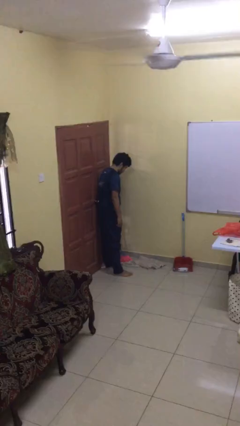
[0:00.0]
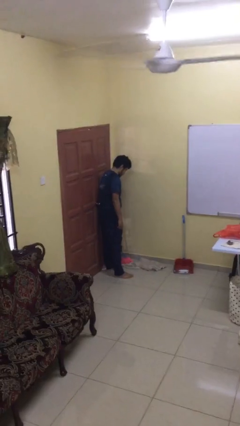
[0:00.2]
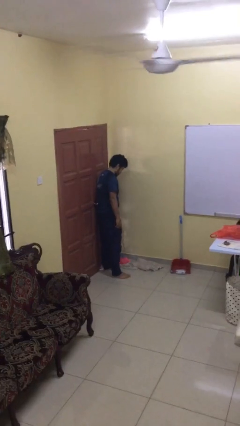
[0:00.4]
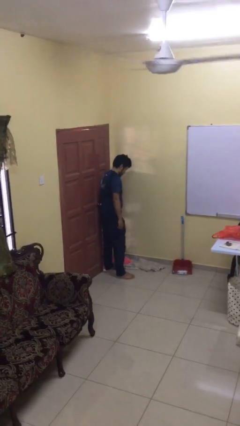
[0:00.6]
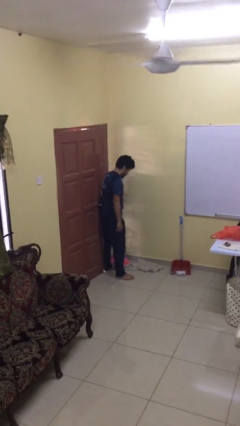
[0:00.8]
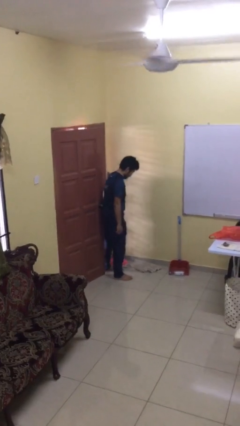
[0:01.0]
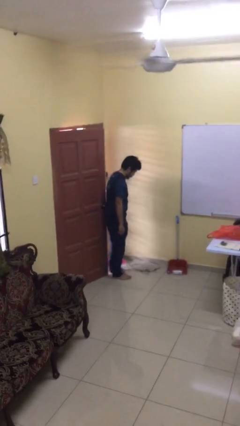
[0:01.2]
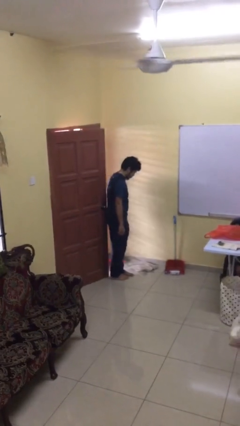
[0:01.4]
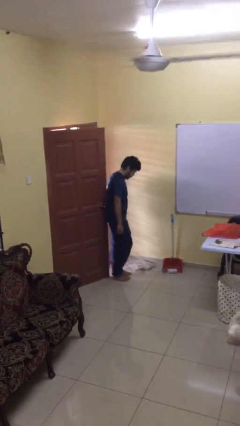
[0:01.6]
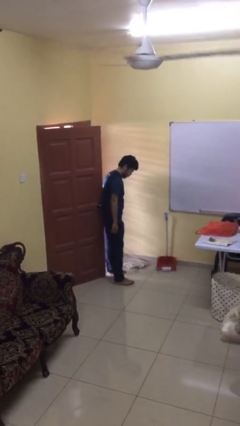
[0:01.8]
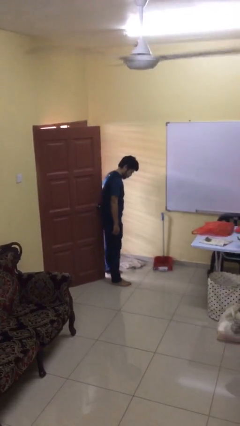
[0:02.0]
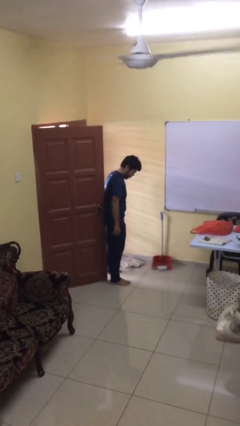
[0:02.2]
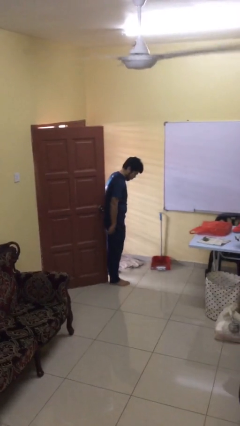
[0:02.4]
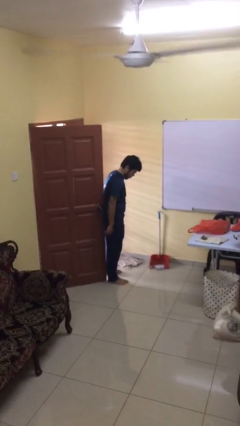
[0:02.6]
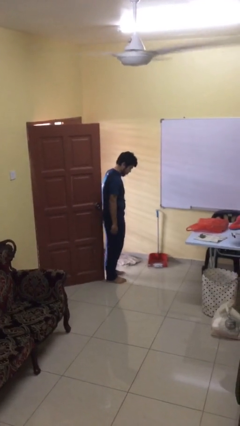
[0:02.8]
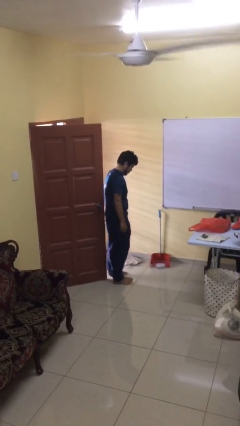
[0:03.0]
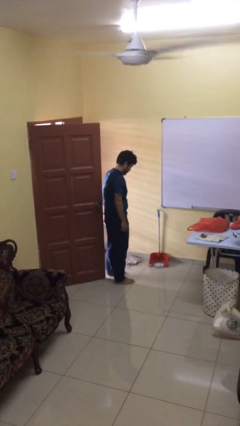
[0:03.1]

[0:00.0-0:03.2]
person opens facility door

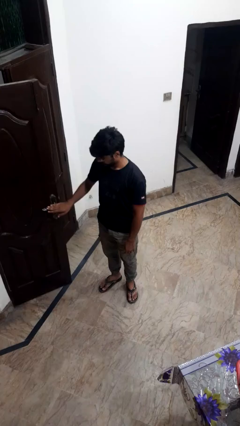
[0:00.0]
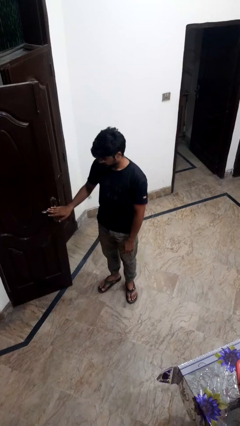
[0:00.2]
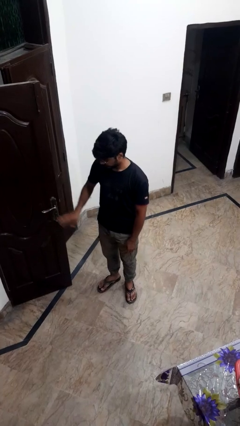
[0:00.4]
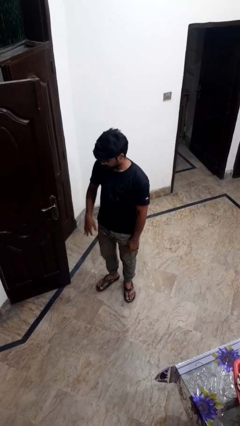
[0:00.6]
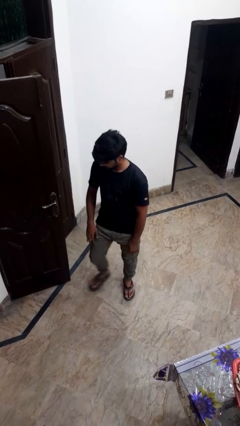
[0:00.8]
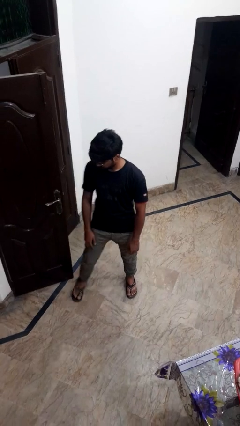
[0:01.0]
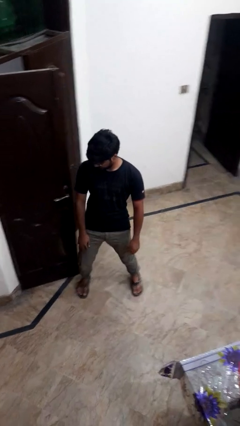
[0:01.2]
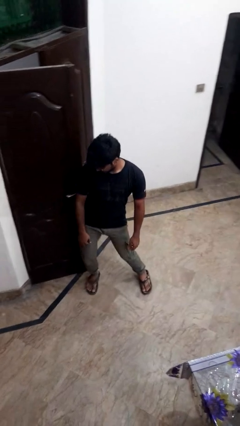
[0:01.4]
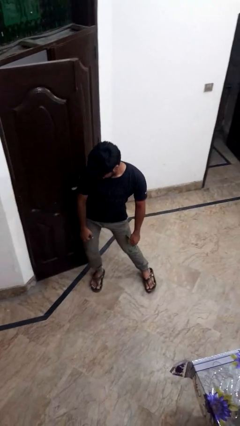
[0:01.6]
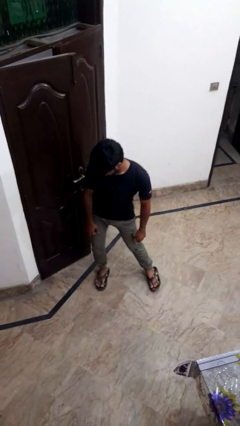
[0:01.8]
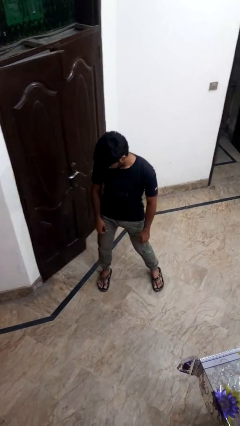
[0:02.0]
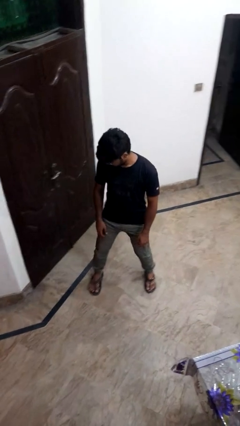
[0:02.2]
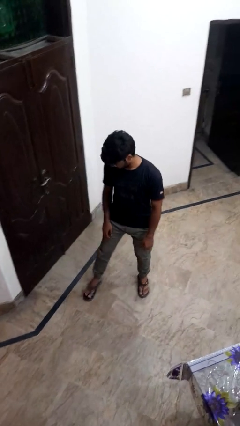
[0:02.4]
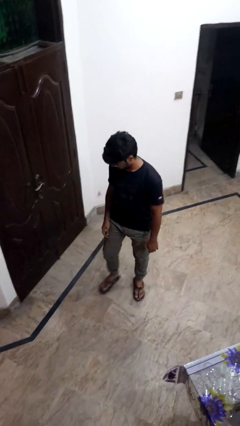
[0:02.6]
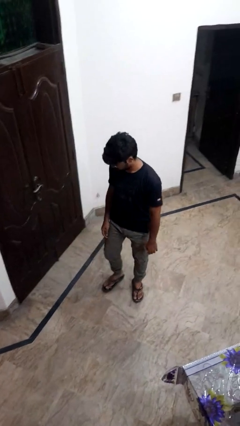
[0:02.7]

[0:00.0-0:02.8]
person closes door with hip

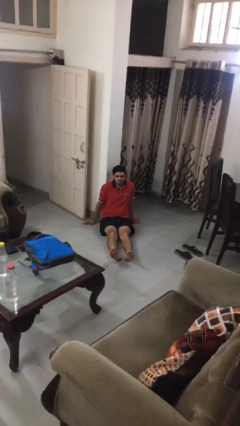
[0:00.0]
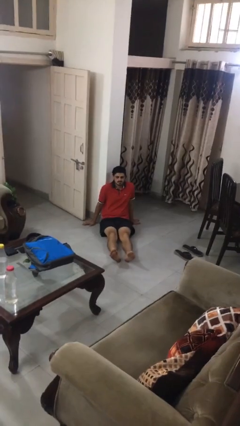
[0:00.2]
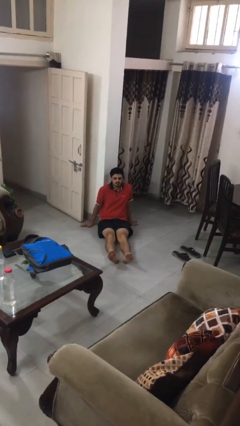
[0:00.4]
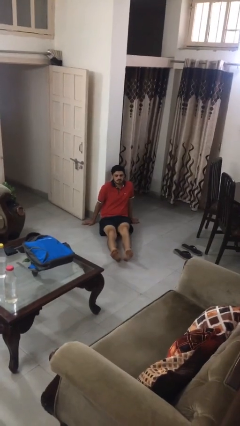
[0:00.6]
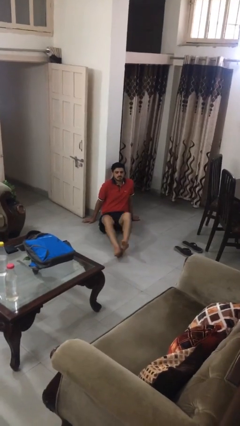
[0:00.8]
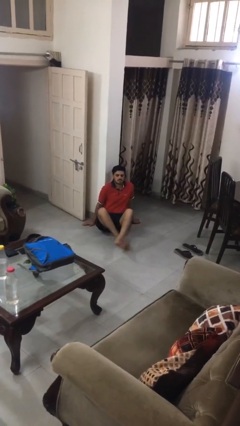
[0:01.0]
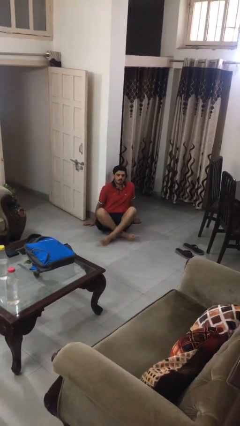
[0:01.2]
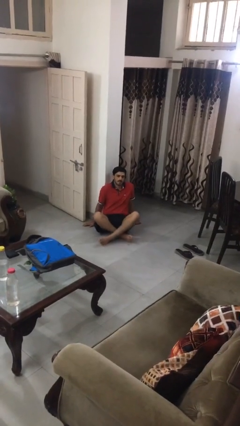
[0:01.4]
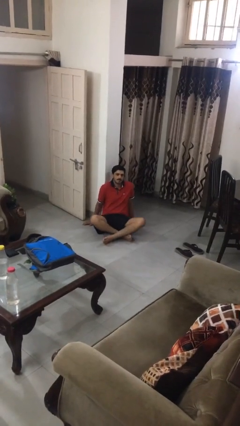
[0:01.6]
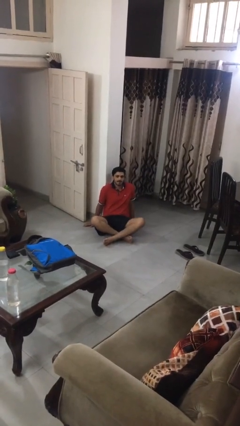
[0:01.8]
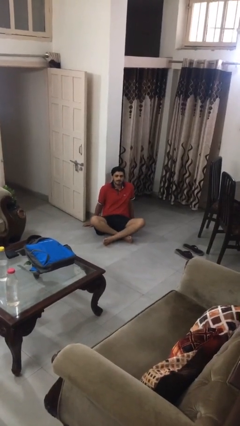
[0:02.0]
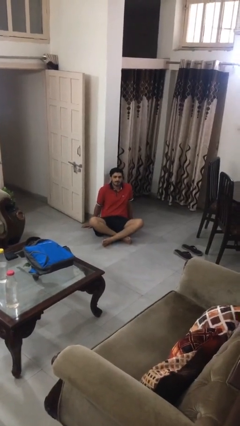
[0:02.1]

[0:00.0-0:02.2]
person crosses legs

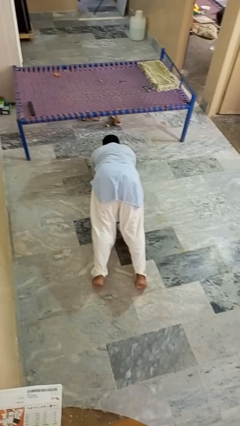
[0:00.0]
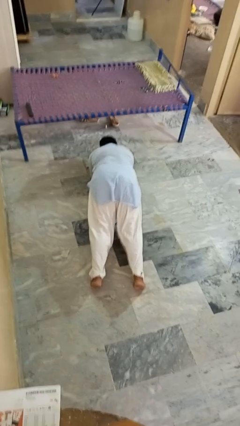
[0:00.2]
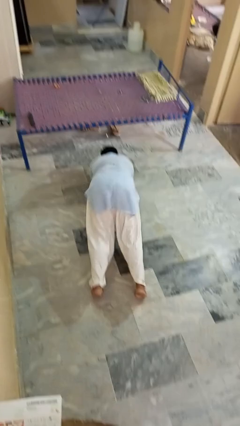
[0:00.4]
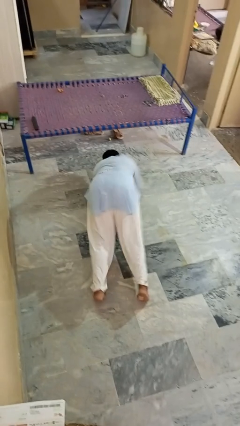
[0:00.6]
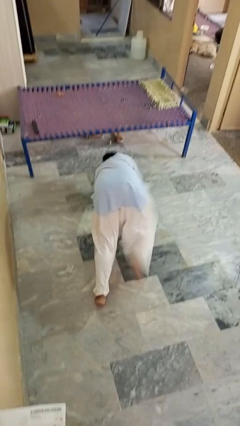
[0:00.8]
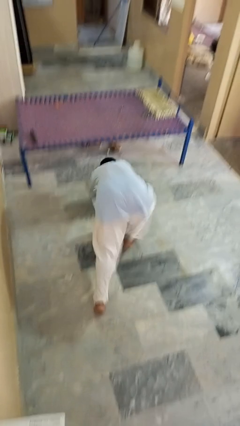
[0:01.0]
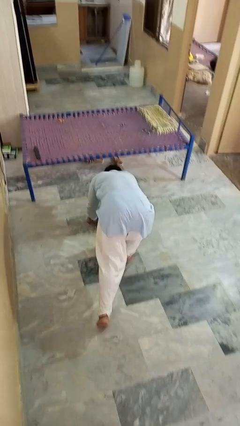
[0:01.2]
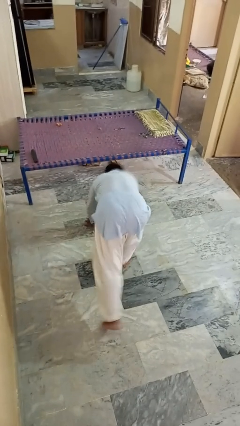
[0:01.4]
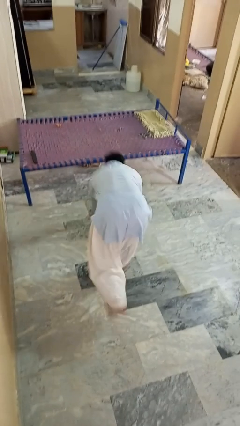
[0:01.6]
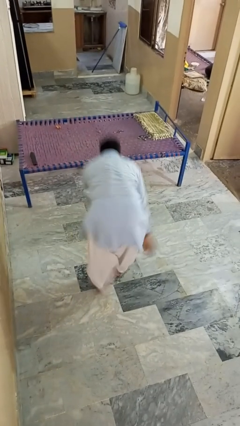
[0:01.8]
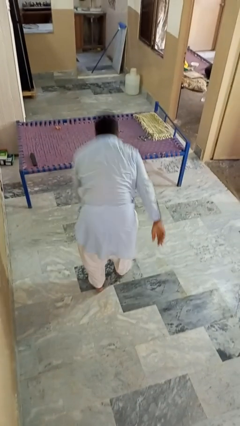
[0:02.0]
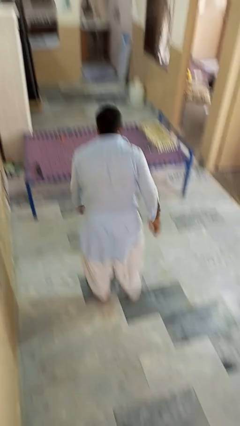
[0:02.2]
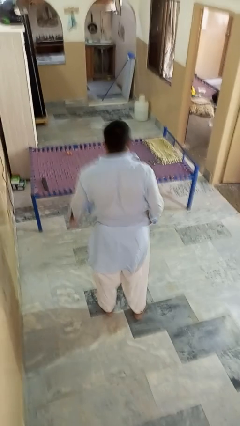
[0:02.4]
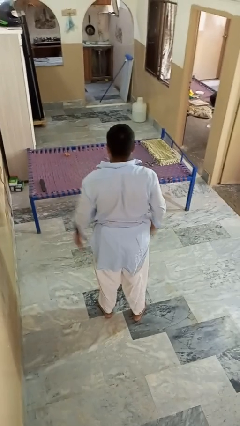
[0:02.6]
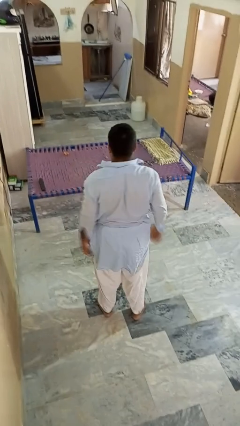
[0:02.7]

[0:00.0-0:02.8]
person stands up from floor

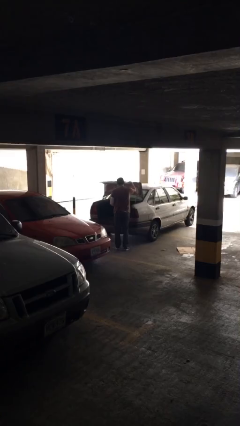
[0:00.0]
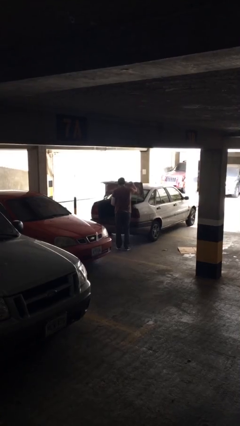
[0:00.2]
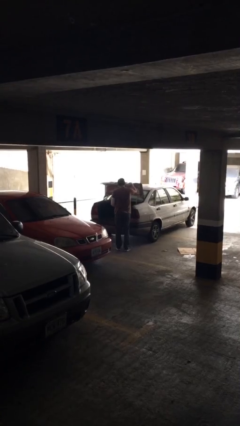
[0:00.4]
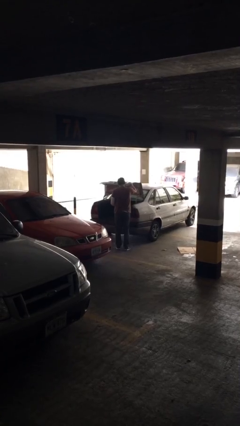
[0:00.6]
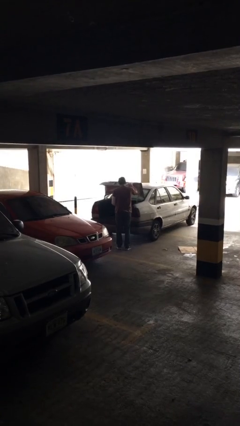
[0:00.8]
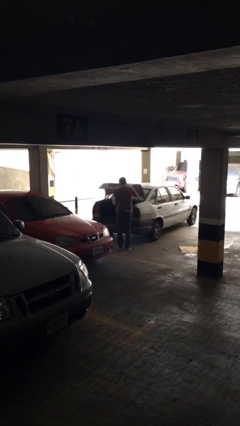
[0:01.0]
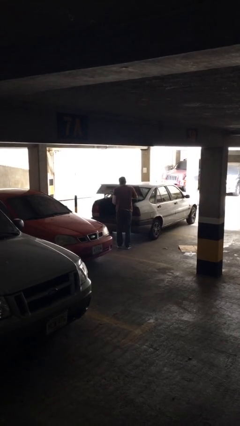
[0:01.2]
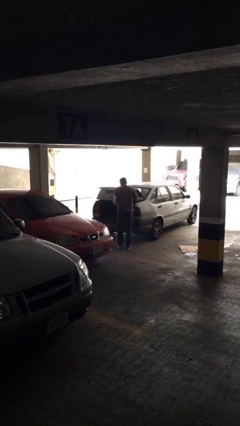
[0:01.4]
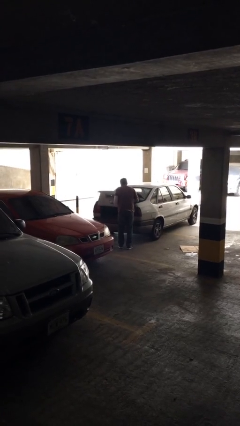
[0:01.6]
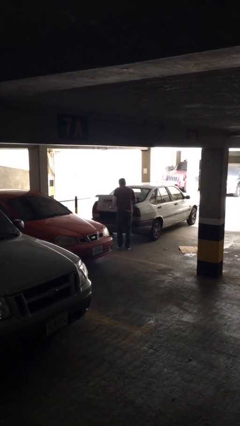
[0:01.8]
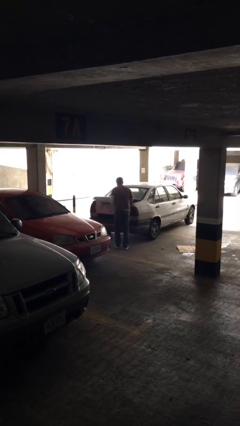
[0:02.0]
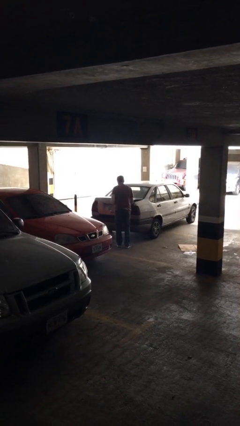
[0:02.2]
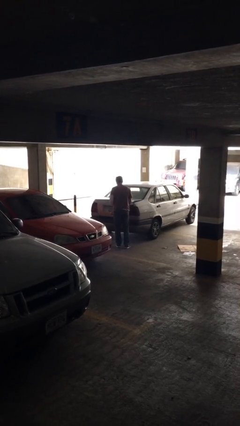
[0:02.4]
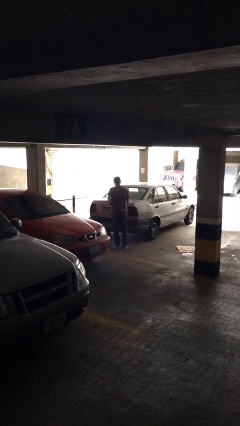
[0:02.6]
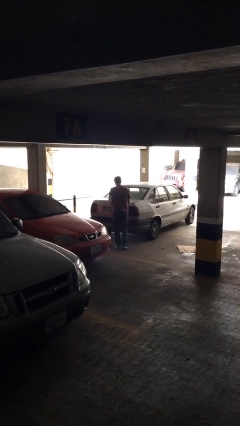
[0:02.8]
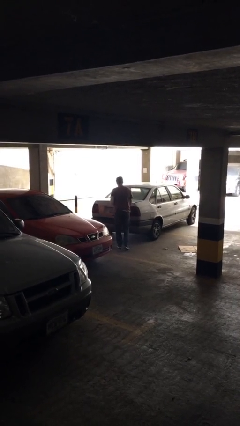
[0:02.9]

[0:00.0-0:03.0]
person closes car trunk

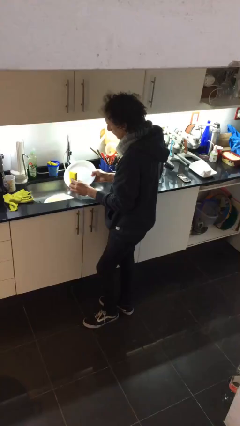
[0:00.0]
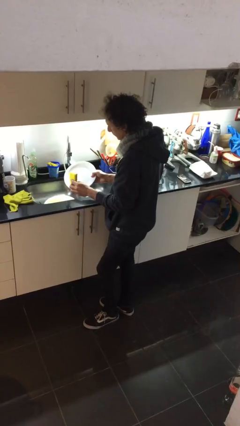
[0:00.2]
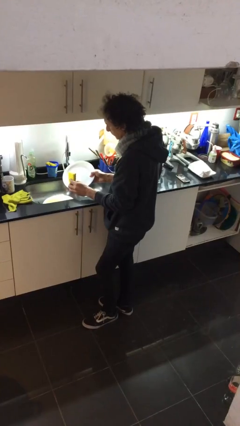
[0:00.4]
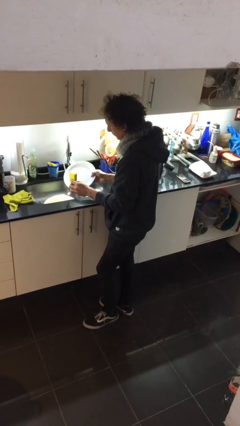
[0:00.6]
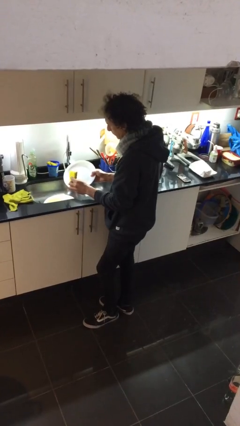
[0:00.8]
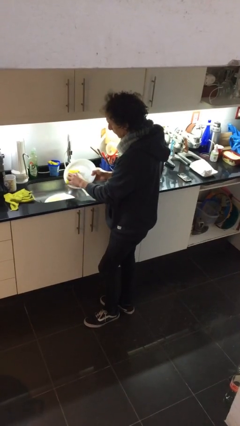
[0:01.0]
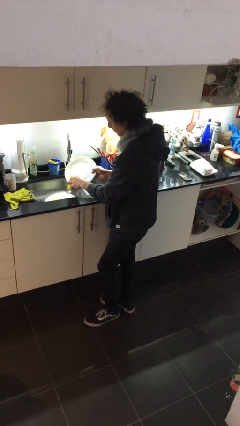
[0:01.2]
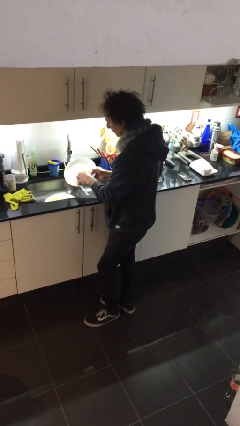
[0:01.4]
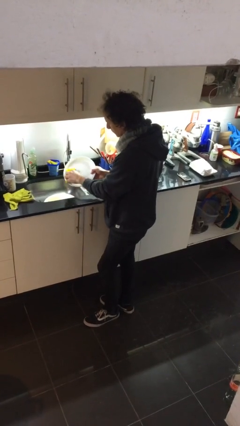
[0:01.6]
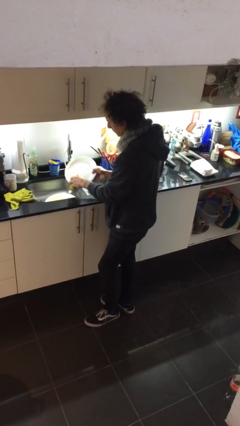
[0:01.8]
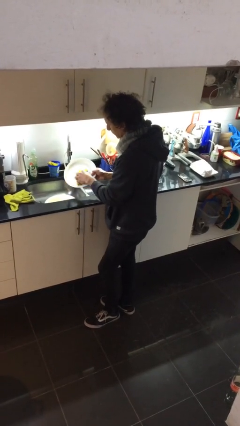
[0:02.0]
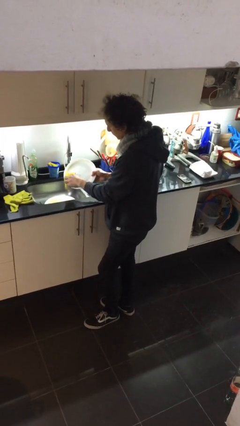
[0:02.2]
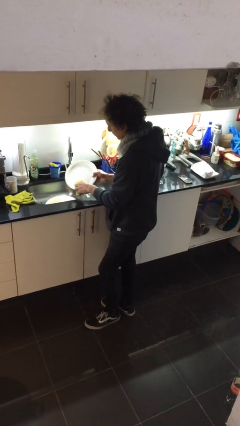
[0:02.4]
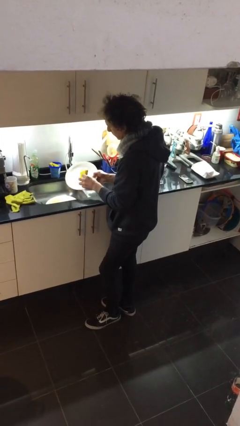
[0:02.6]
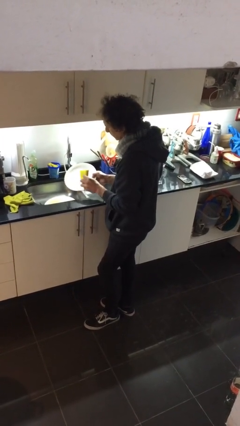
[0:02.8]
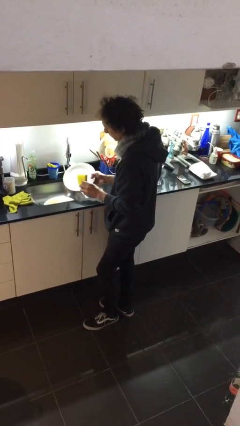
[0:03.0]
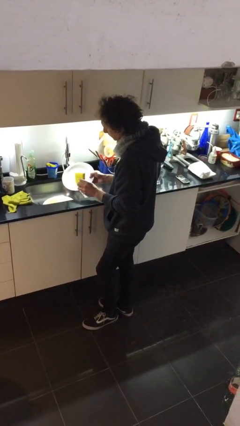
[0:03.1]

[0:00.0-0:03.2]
person washes dish

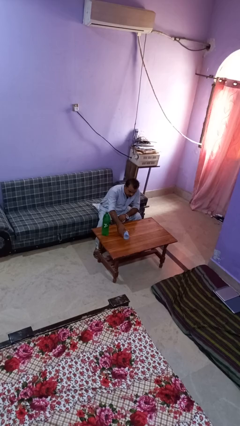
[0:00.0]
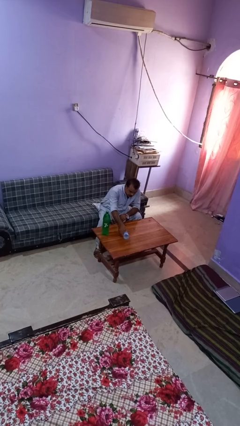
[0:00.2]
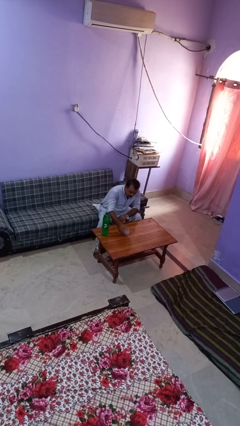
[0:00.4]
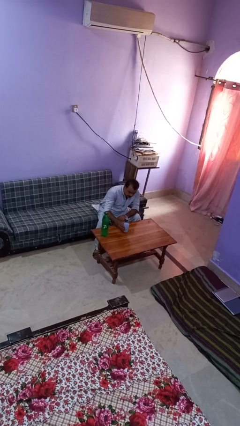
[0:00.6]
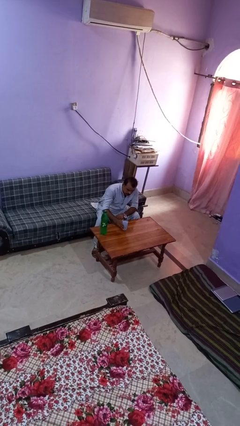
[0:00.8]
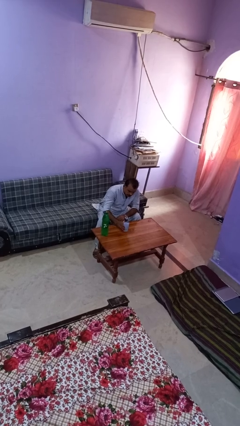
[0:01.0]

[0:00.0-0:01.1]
person sets upright glass
